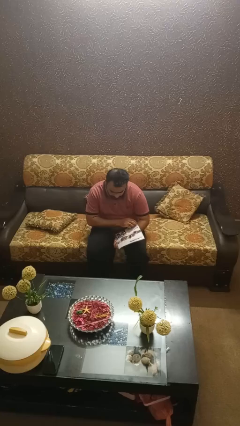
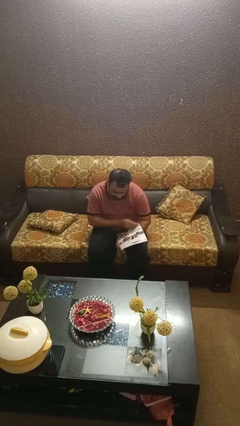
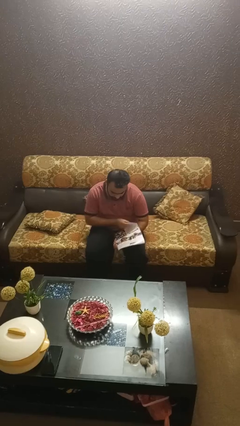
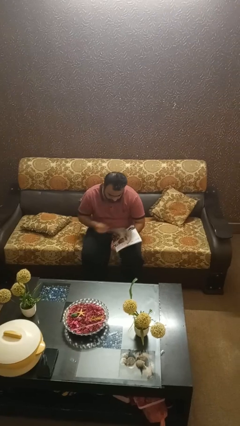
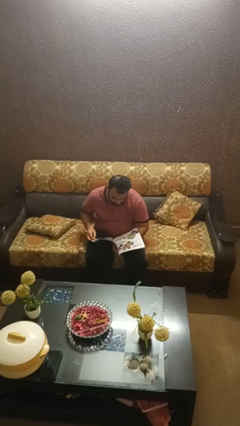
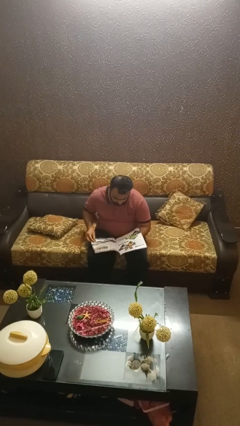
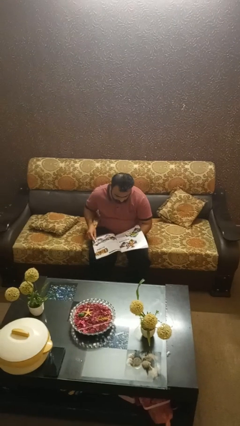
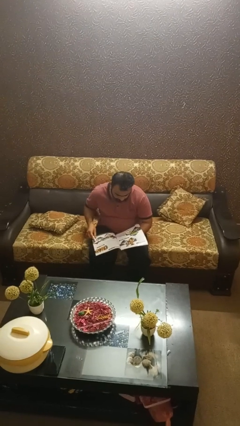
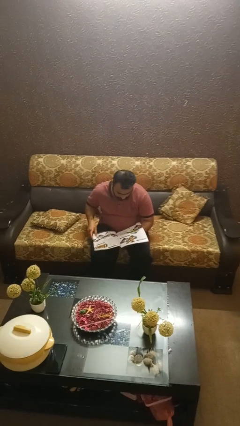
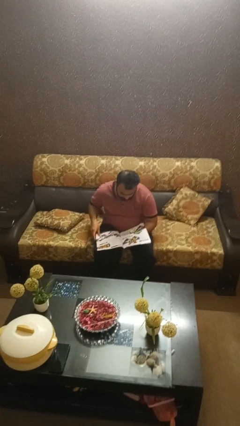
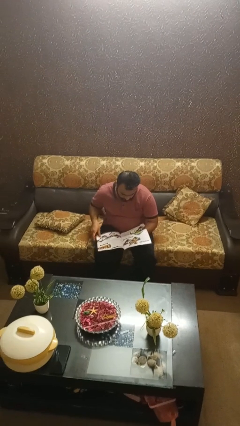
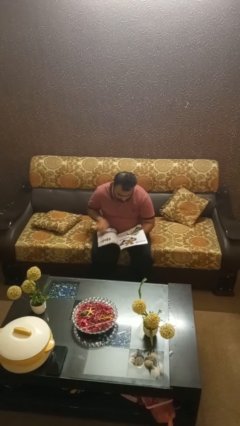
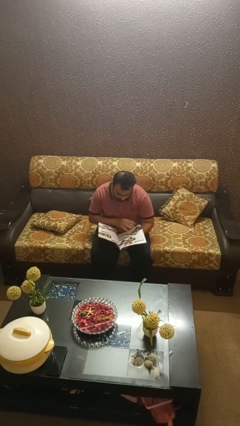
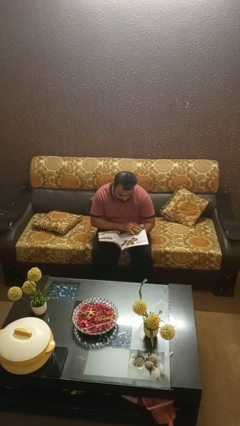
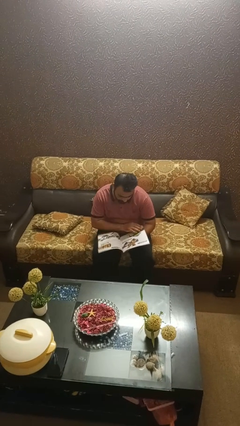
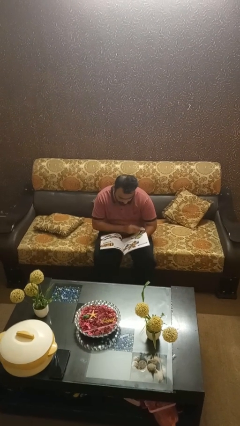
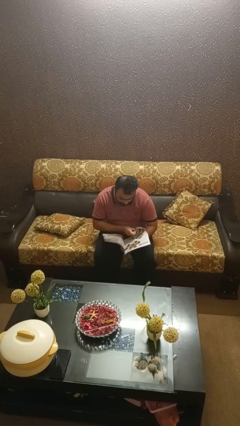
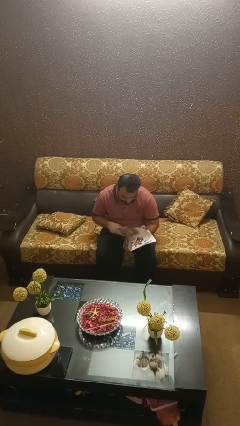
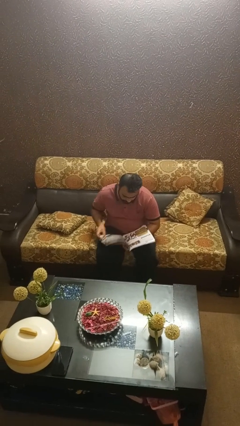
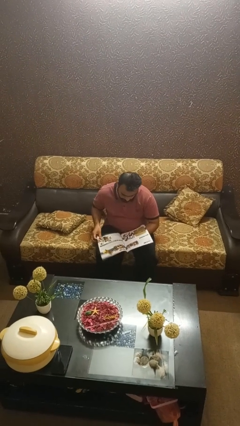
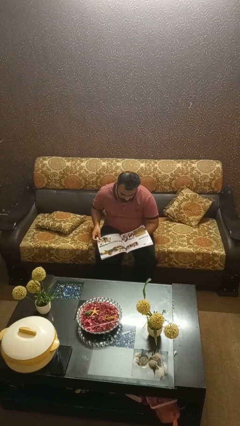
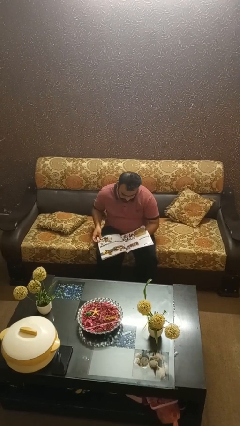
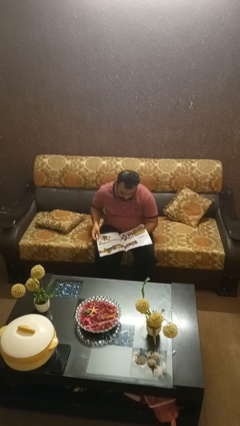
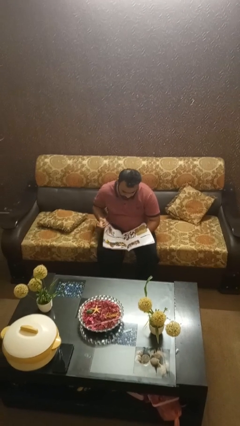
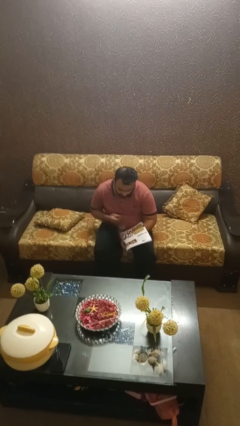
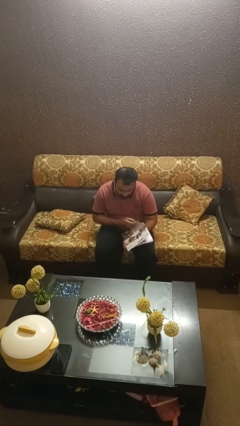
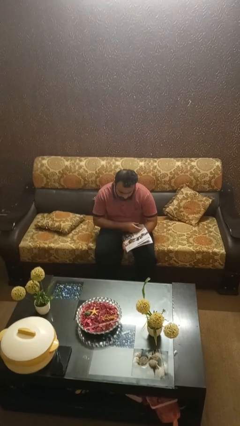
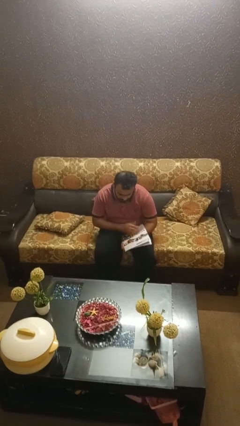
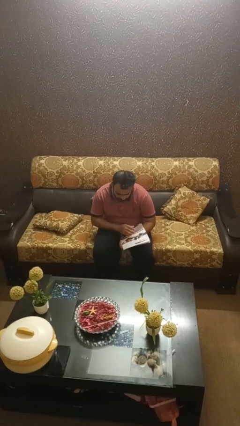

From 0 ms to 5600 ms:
person reads magazine

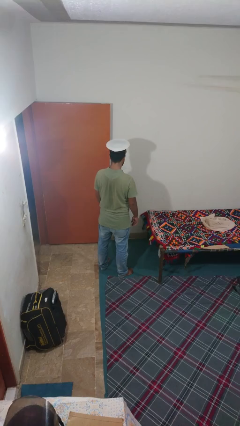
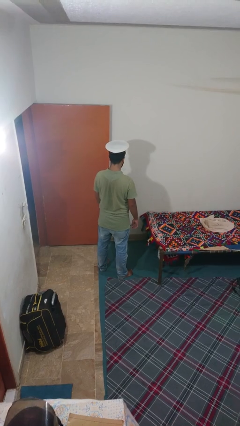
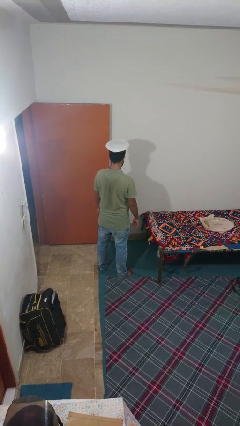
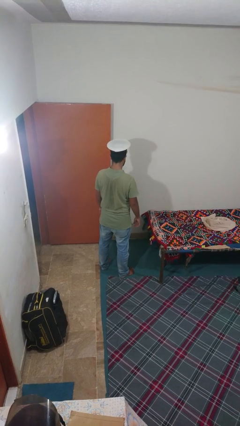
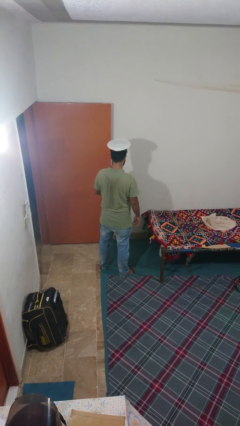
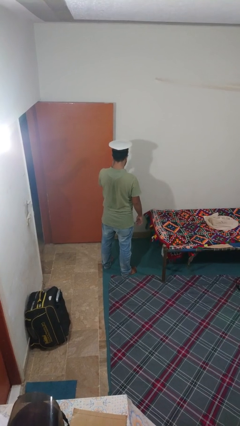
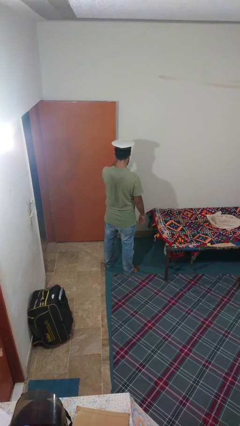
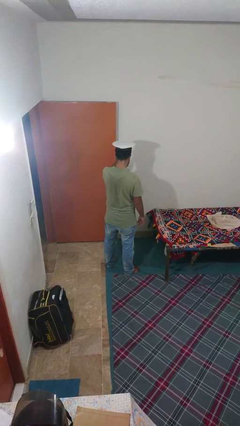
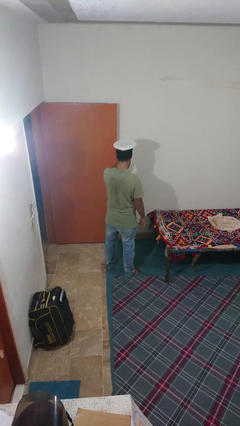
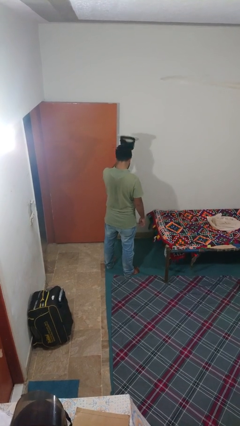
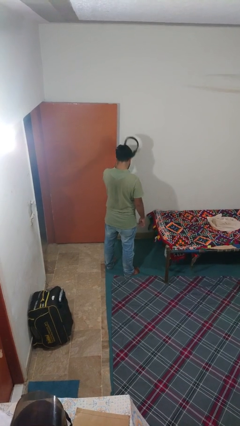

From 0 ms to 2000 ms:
person takes off hat

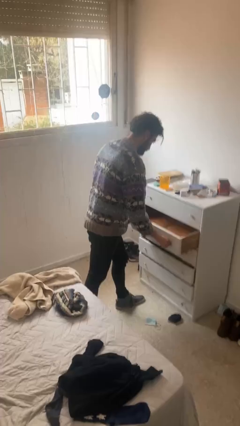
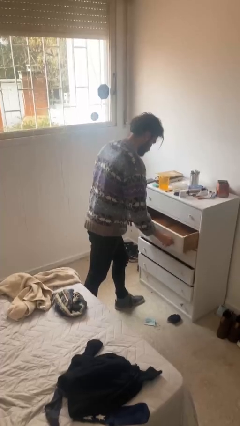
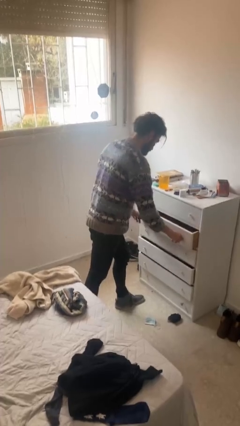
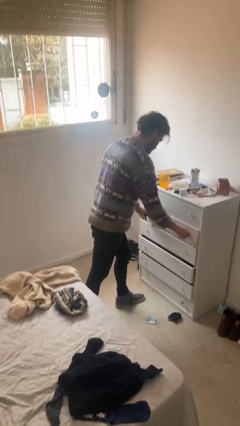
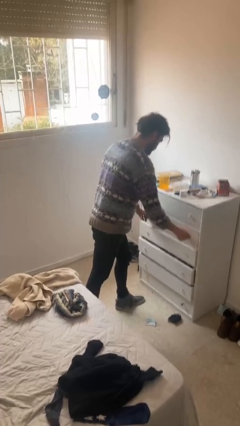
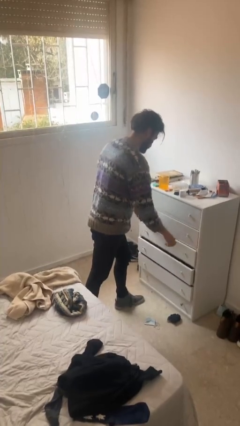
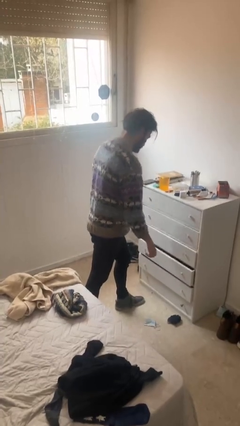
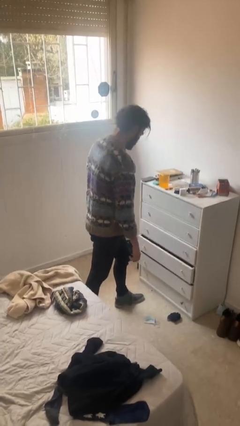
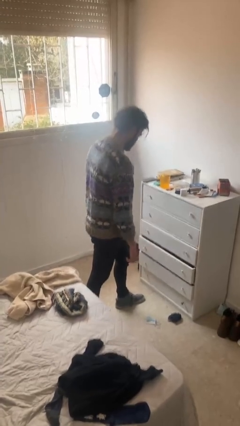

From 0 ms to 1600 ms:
person closes dresser drawer

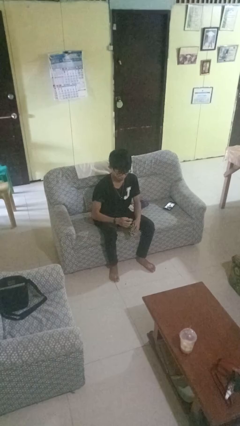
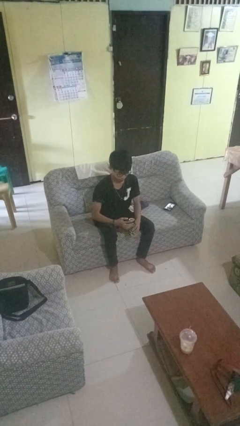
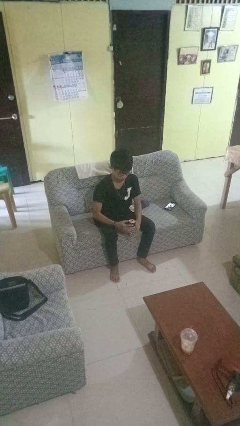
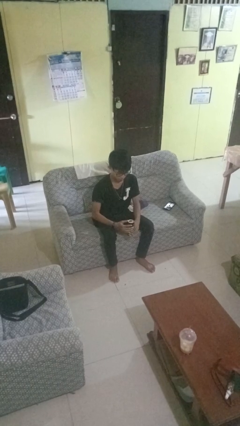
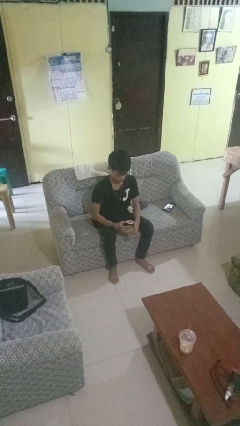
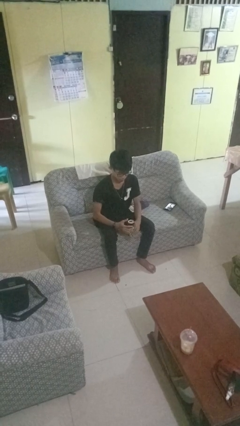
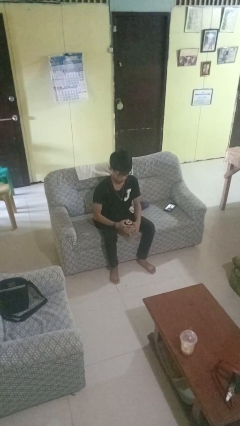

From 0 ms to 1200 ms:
person opens beverage can

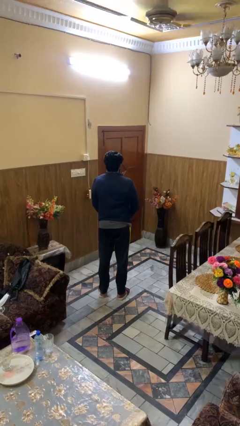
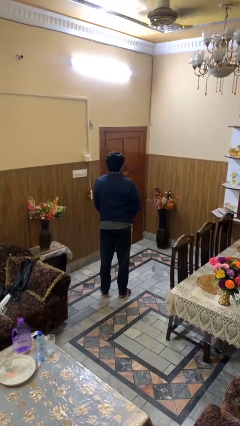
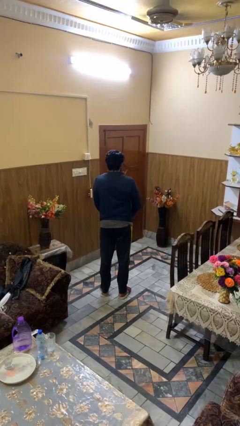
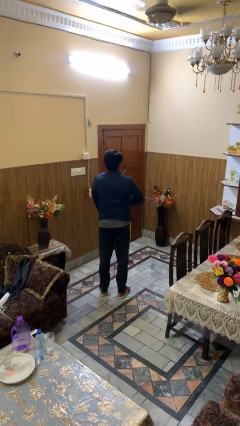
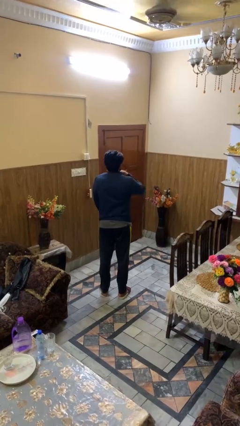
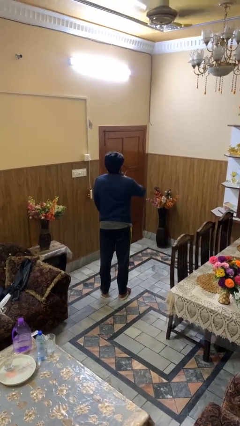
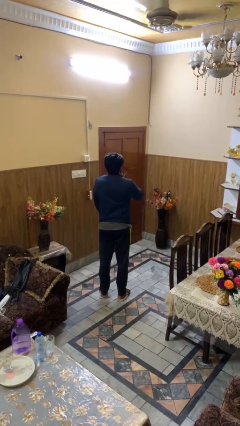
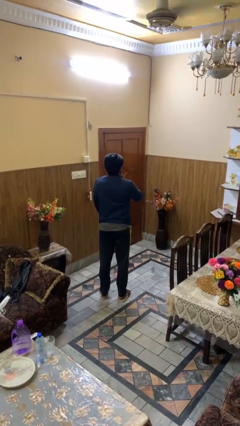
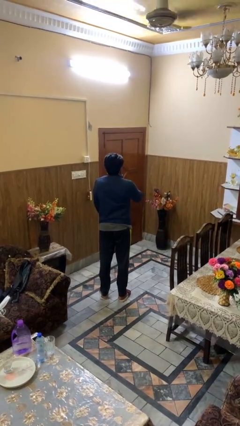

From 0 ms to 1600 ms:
person zips up jacket

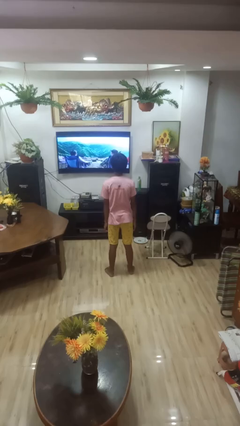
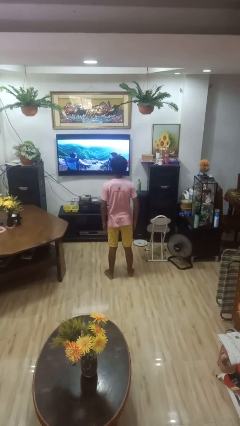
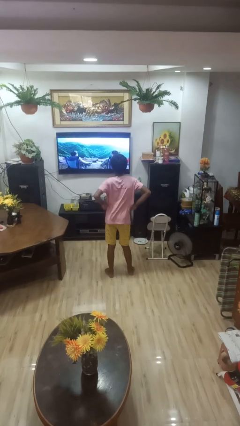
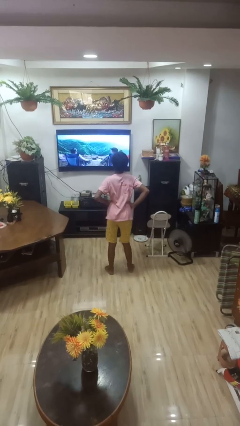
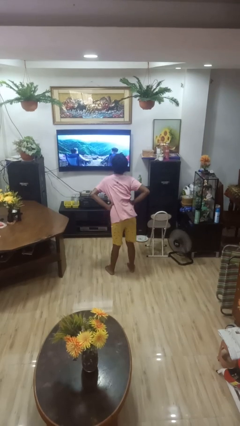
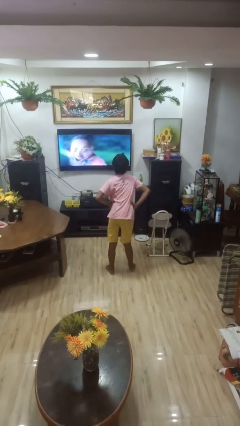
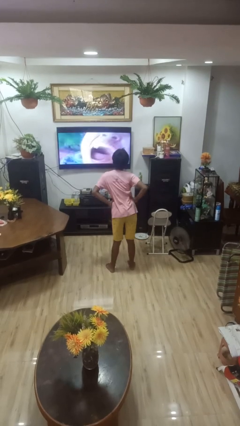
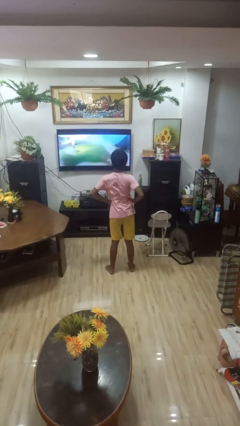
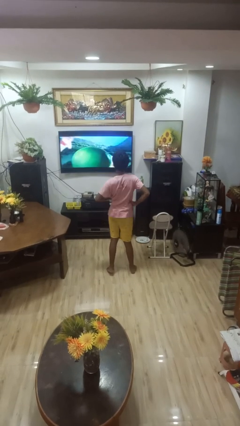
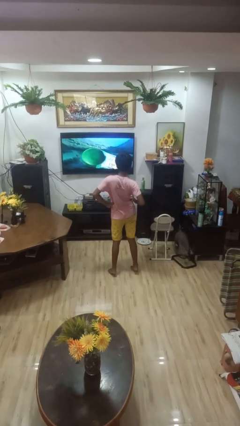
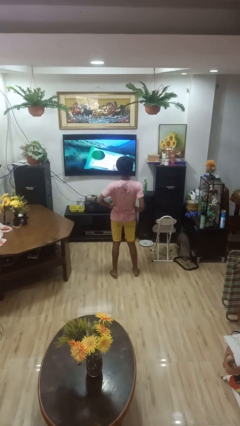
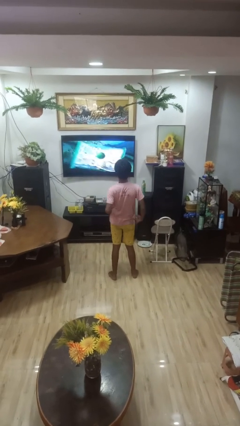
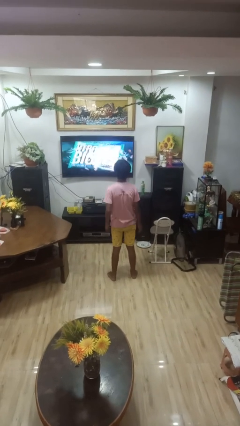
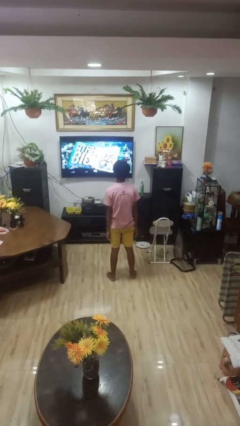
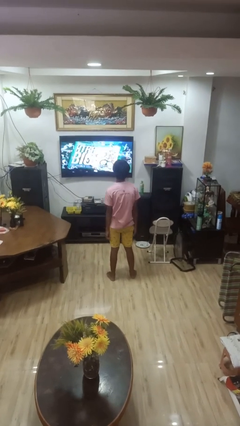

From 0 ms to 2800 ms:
person wiggles hips

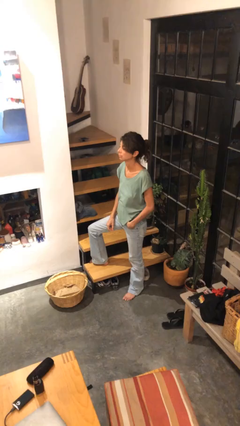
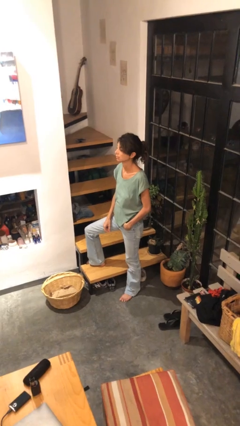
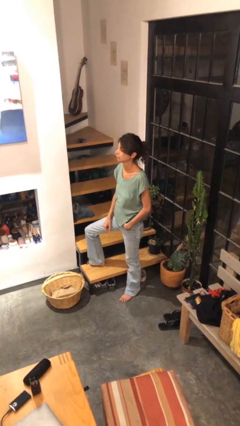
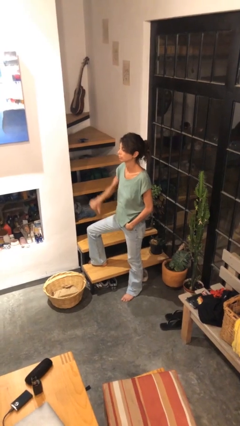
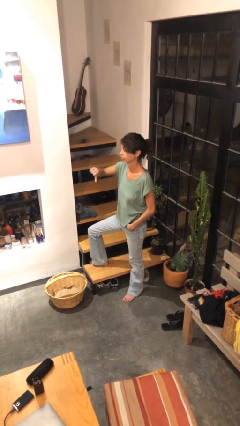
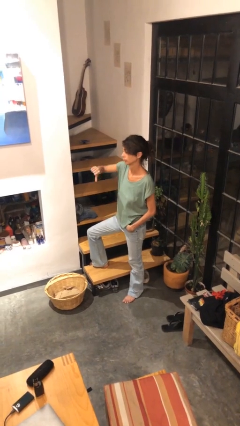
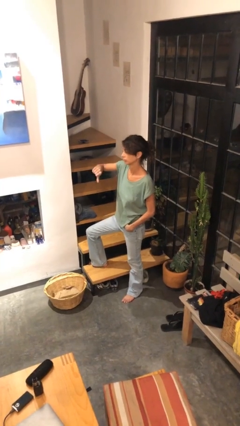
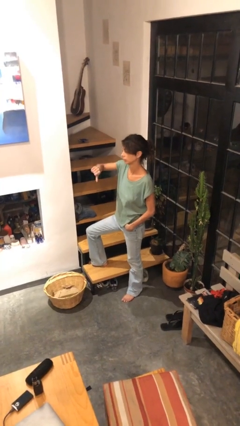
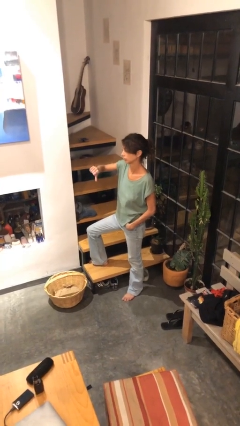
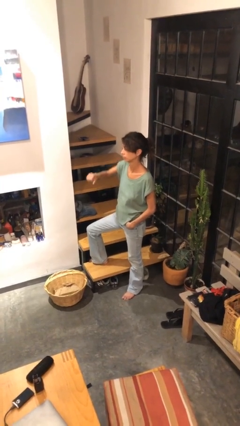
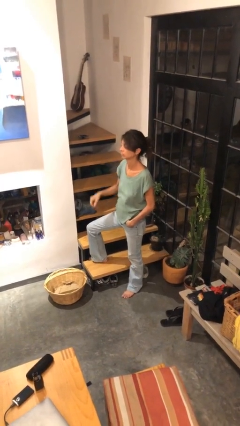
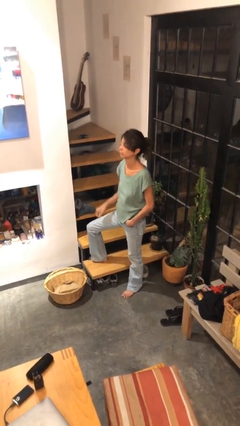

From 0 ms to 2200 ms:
person gestures thumbs down
